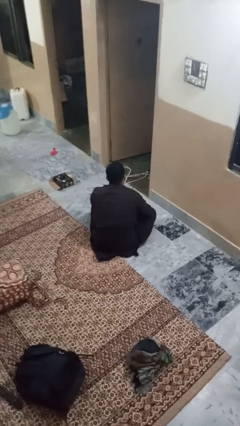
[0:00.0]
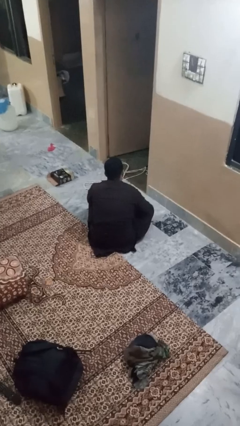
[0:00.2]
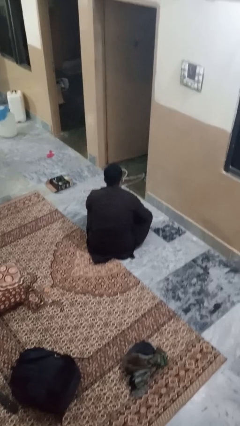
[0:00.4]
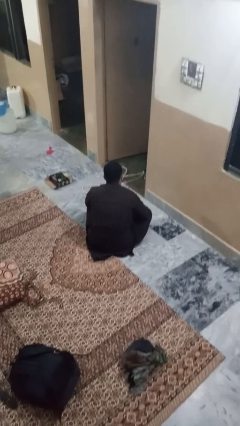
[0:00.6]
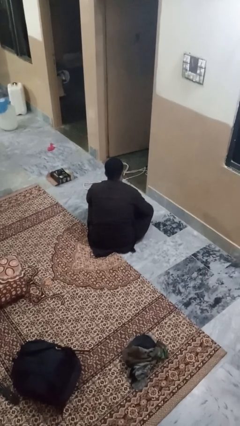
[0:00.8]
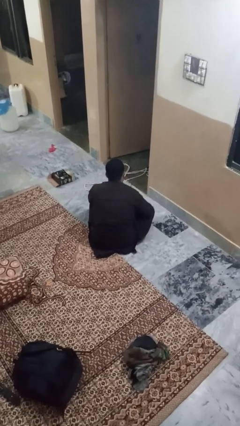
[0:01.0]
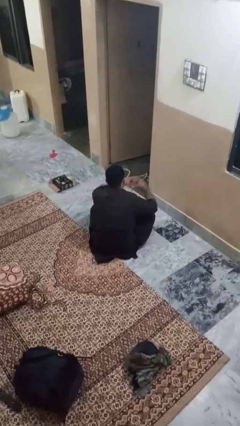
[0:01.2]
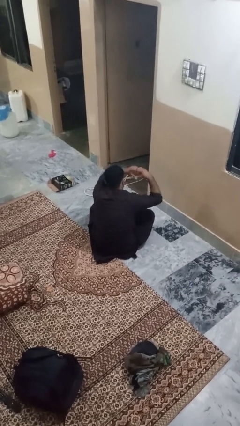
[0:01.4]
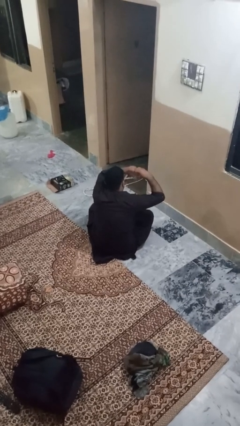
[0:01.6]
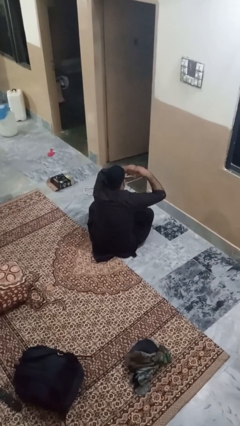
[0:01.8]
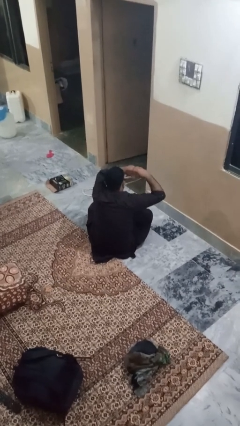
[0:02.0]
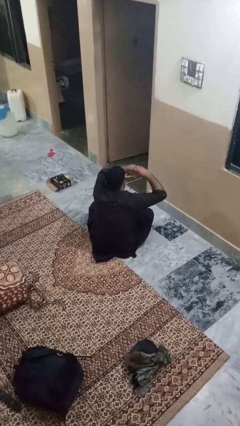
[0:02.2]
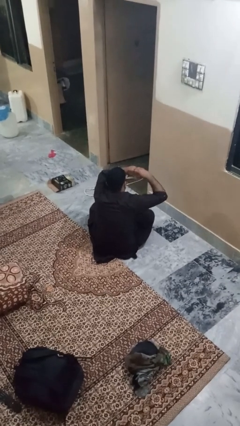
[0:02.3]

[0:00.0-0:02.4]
person gestures heart

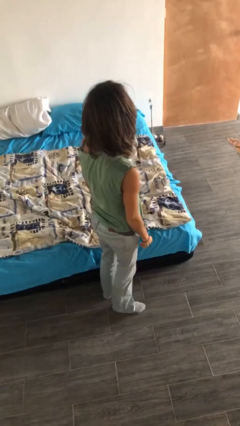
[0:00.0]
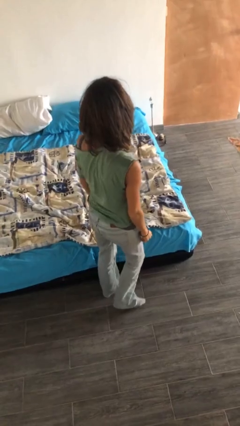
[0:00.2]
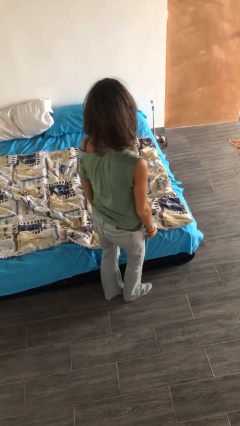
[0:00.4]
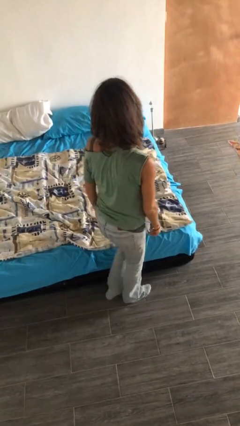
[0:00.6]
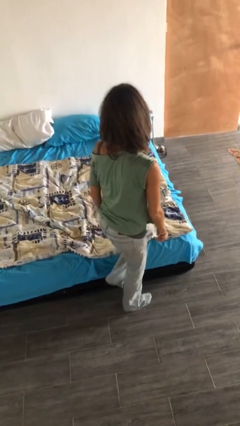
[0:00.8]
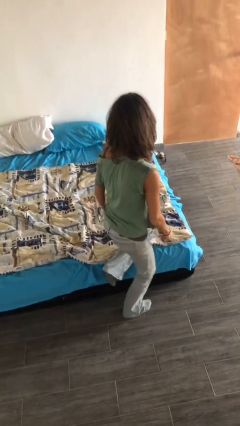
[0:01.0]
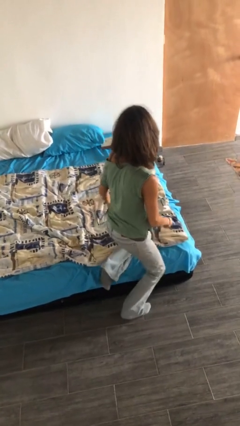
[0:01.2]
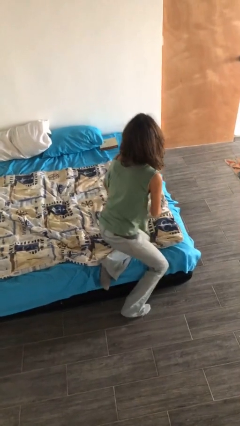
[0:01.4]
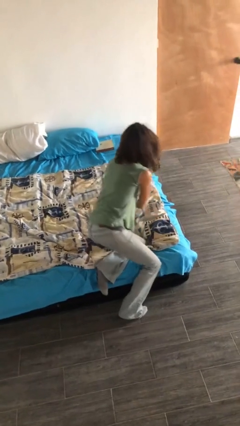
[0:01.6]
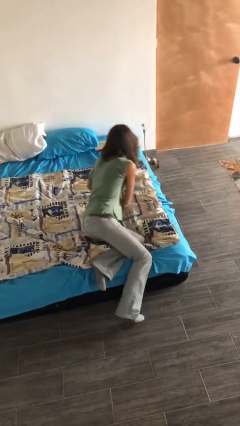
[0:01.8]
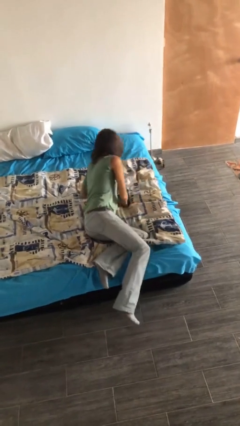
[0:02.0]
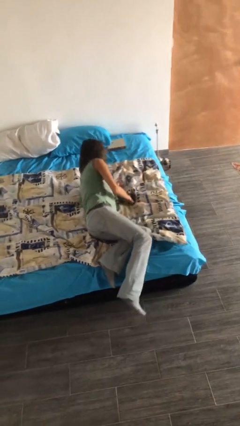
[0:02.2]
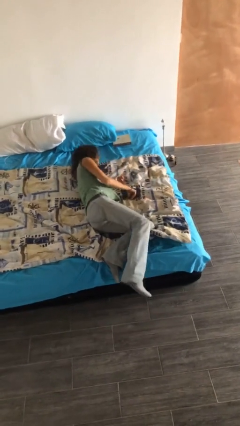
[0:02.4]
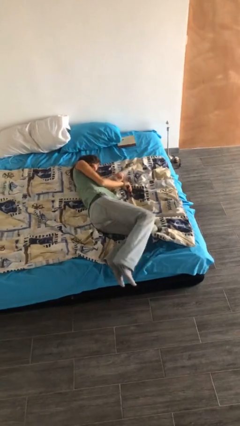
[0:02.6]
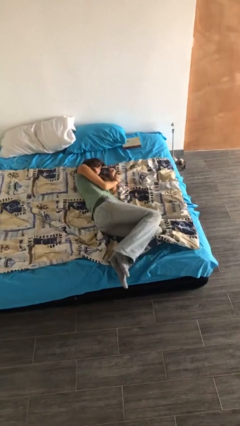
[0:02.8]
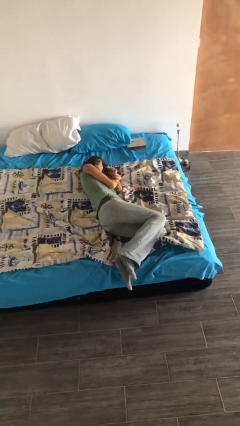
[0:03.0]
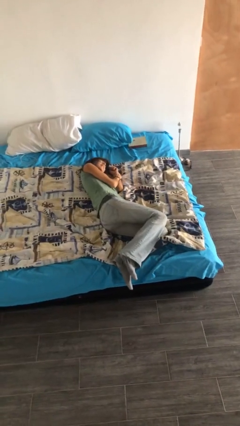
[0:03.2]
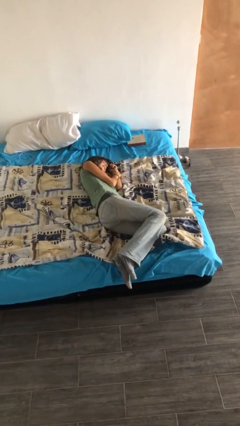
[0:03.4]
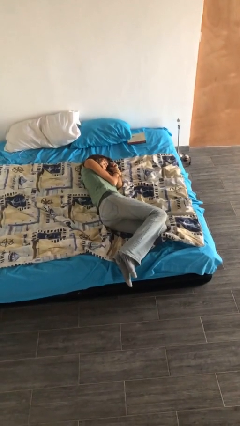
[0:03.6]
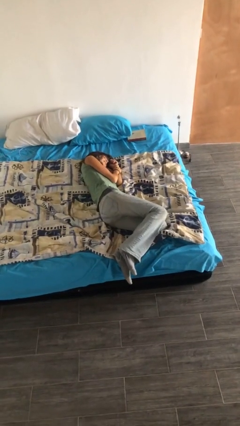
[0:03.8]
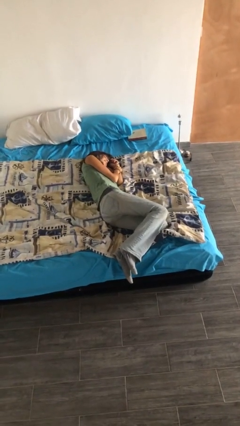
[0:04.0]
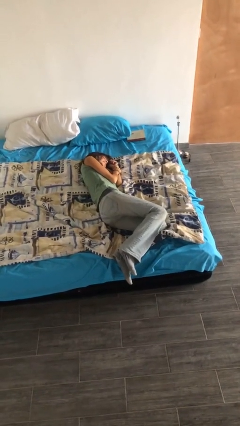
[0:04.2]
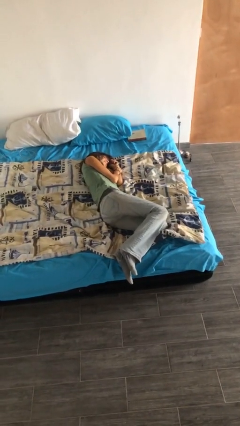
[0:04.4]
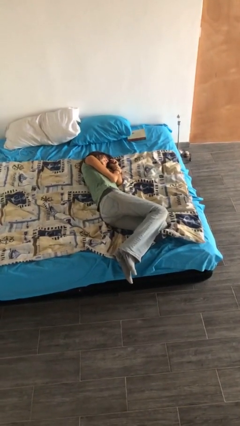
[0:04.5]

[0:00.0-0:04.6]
person lies down on bed

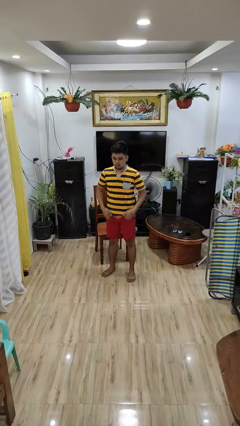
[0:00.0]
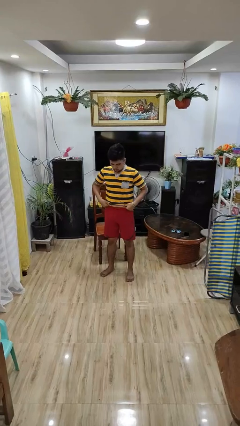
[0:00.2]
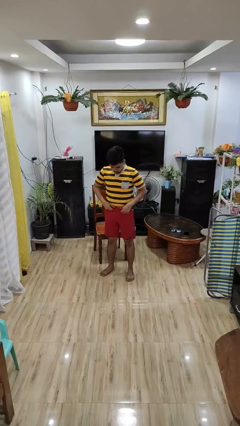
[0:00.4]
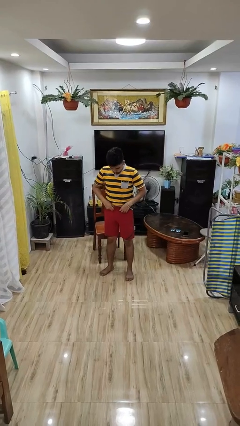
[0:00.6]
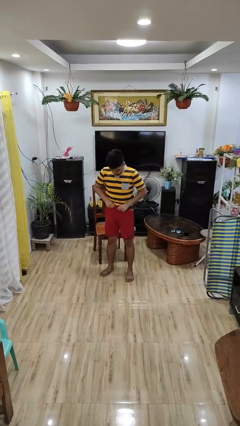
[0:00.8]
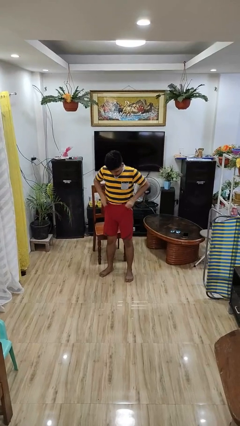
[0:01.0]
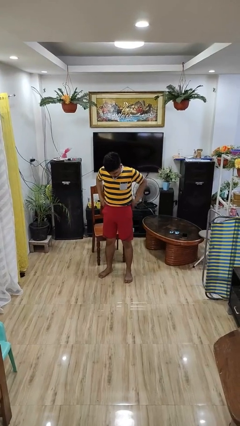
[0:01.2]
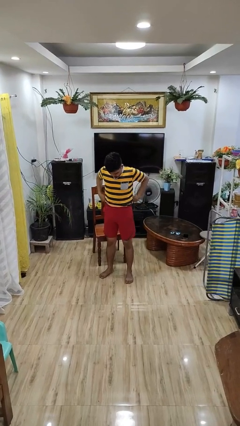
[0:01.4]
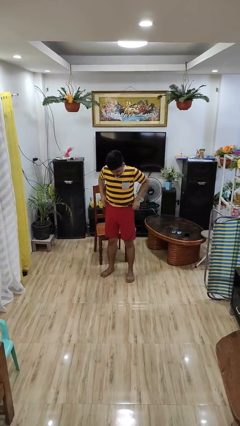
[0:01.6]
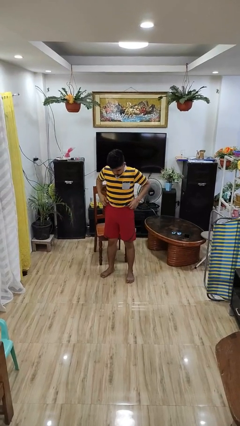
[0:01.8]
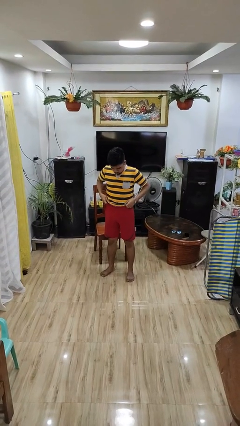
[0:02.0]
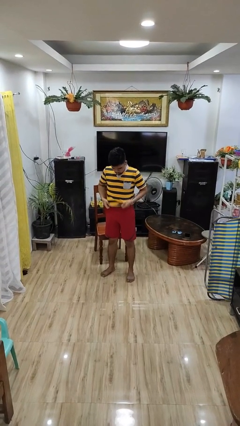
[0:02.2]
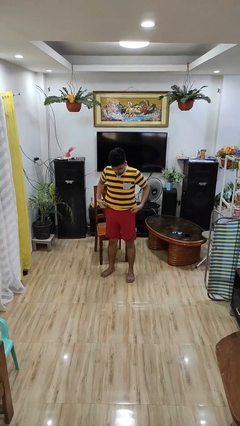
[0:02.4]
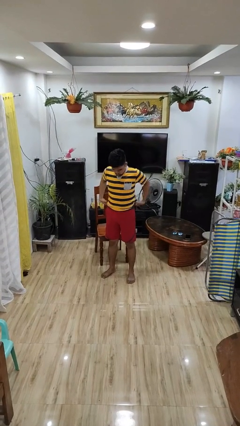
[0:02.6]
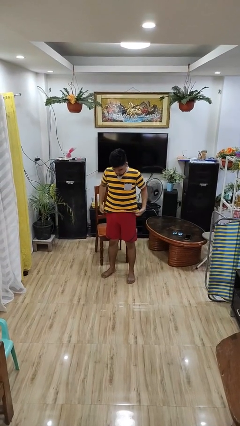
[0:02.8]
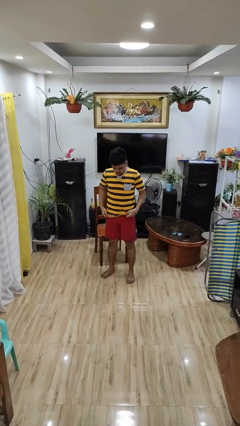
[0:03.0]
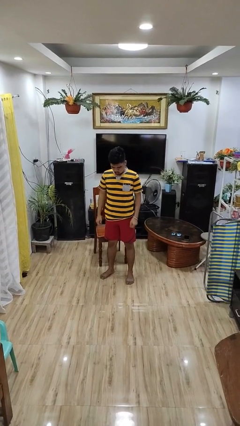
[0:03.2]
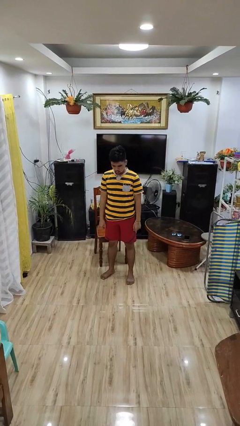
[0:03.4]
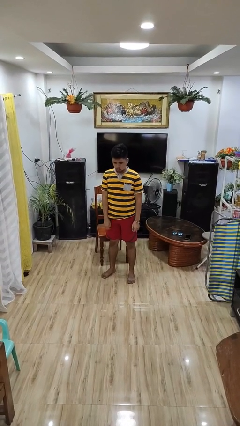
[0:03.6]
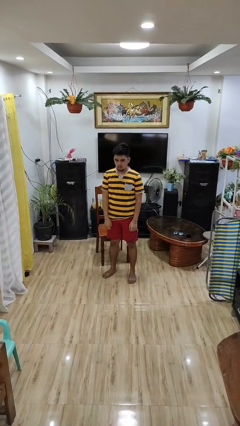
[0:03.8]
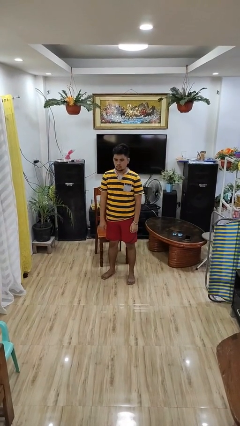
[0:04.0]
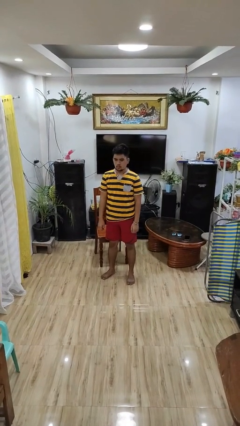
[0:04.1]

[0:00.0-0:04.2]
person hikes up pants

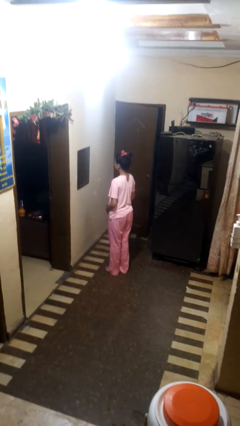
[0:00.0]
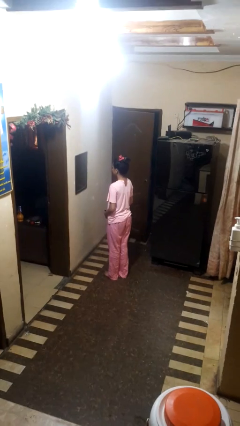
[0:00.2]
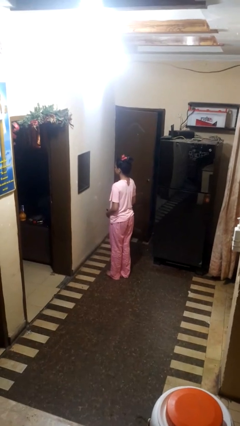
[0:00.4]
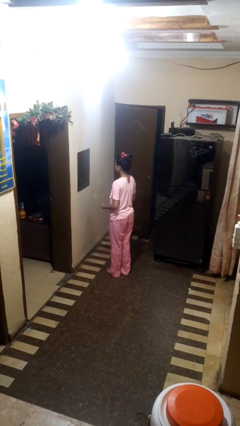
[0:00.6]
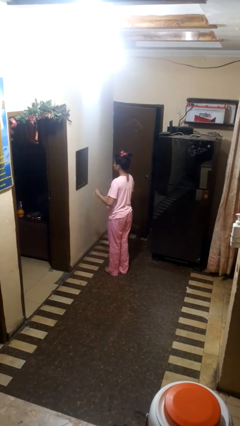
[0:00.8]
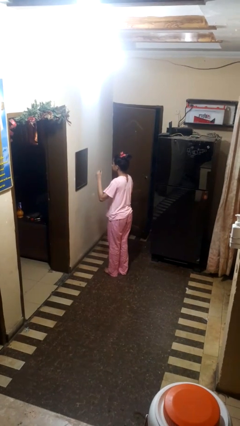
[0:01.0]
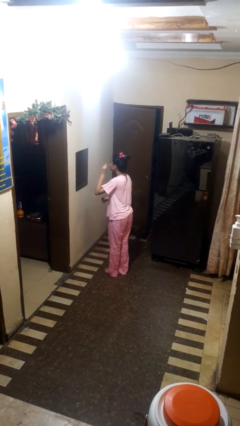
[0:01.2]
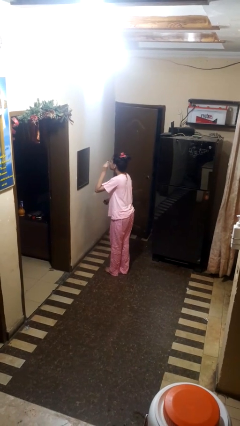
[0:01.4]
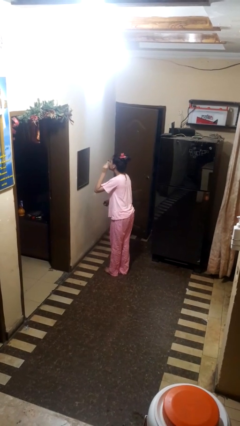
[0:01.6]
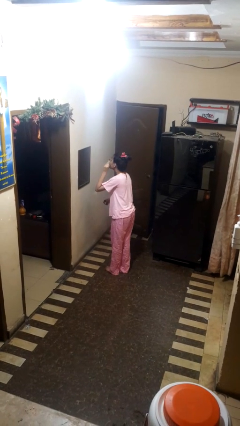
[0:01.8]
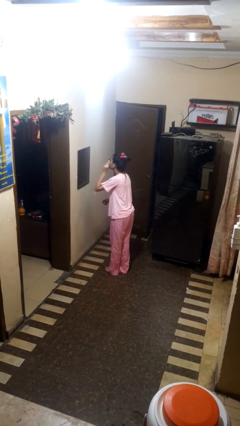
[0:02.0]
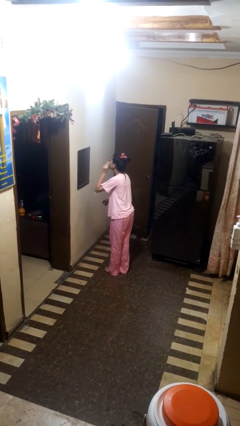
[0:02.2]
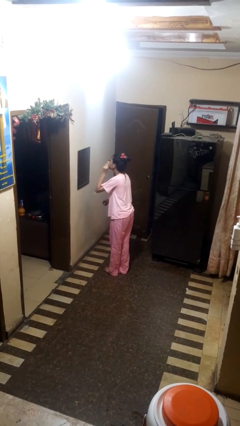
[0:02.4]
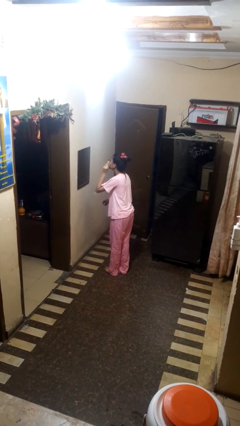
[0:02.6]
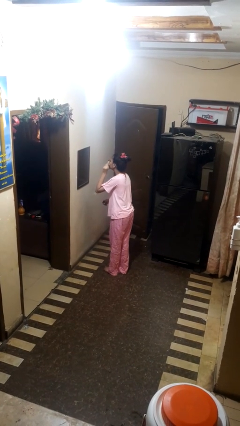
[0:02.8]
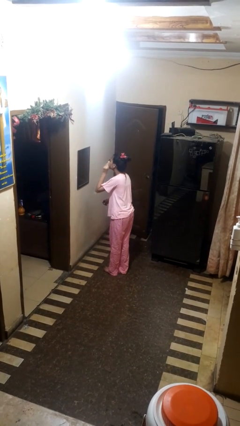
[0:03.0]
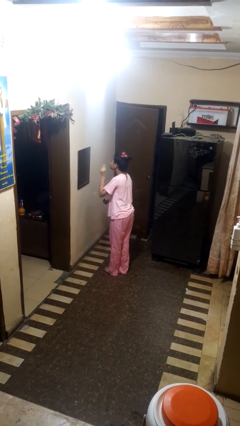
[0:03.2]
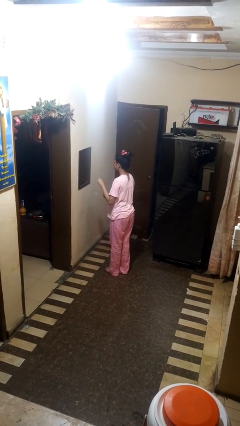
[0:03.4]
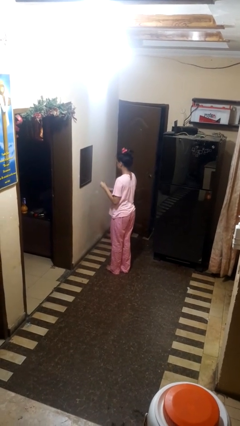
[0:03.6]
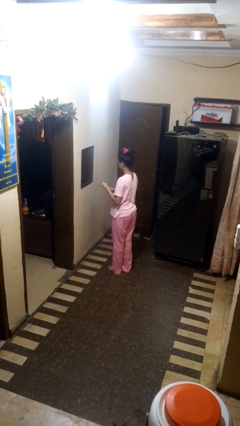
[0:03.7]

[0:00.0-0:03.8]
person applies eye makeup

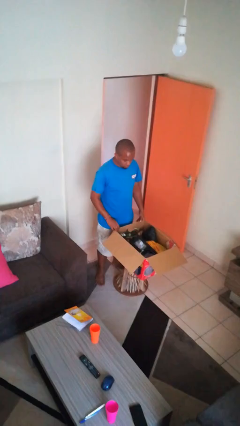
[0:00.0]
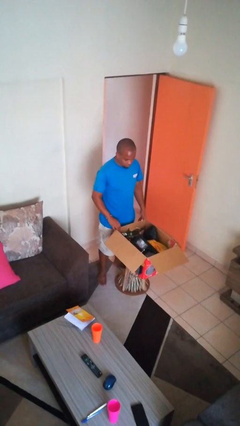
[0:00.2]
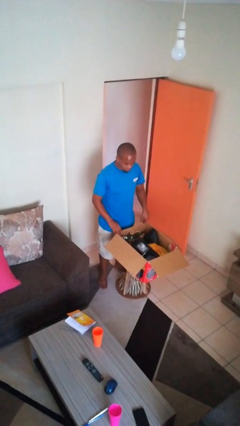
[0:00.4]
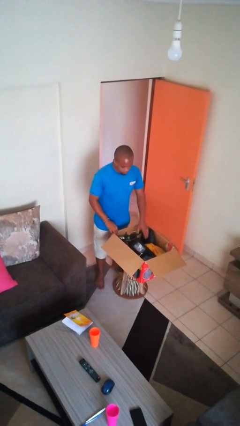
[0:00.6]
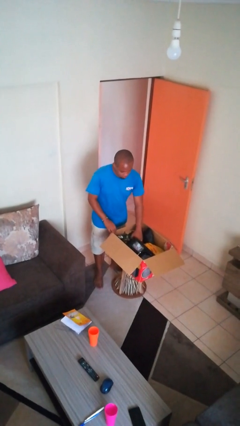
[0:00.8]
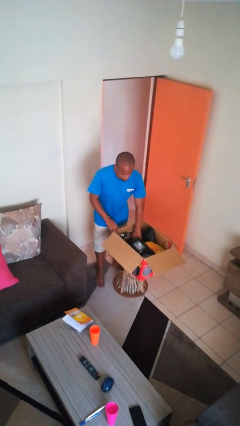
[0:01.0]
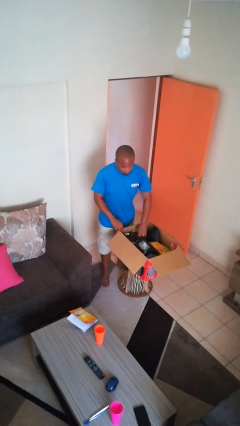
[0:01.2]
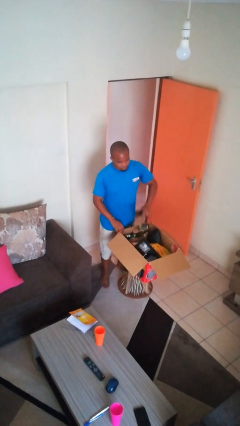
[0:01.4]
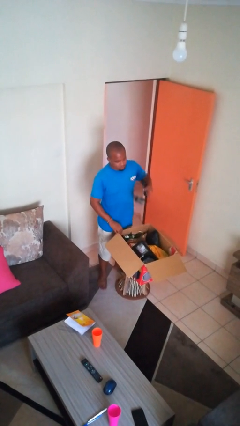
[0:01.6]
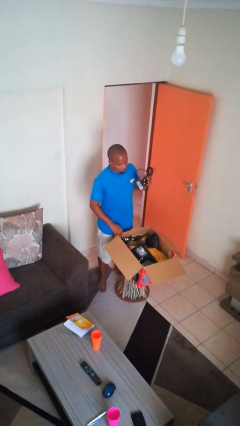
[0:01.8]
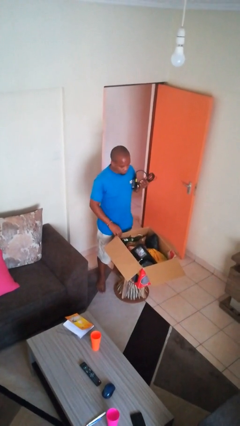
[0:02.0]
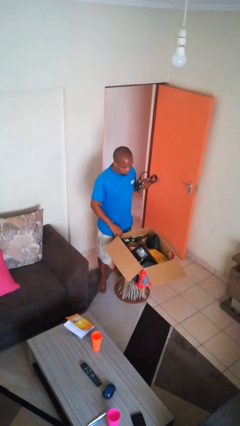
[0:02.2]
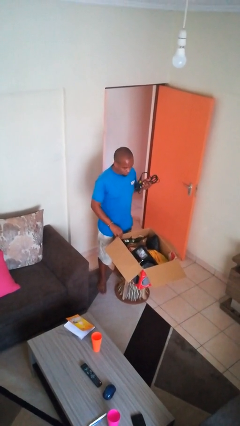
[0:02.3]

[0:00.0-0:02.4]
person takes object from box

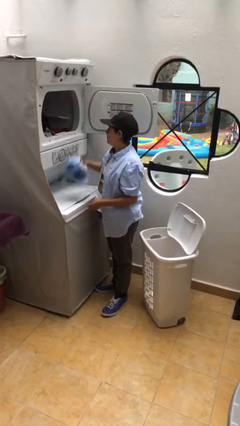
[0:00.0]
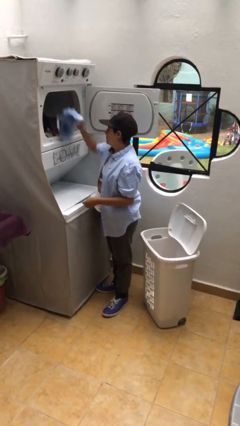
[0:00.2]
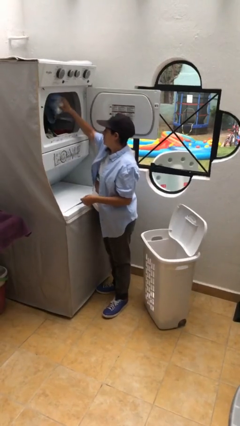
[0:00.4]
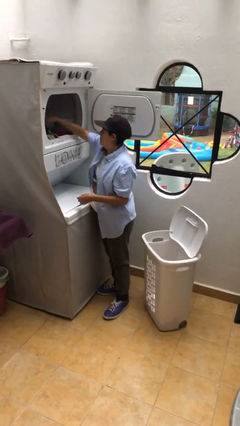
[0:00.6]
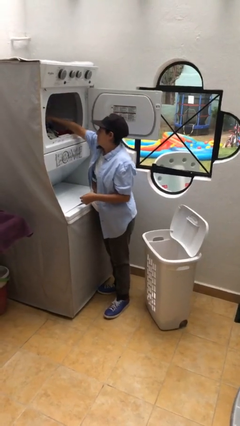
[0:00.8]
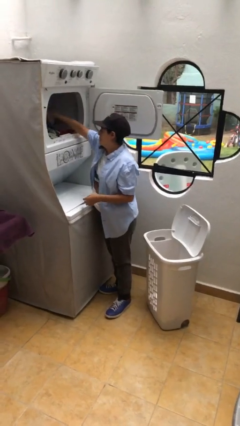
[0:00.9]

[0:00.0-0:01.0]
person loads dryer
